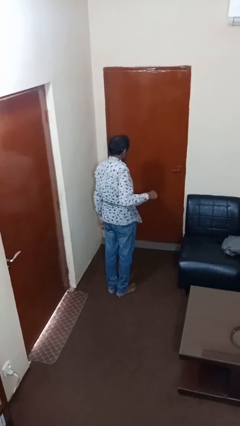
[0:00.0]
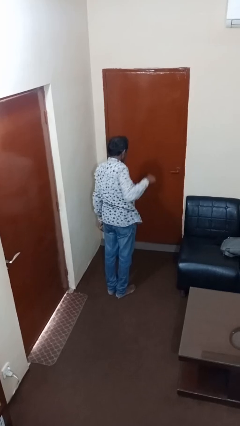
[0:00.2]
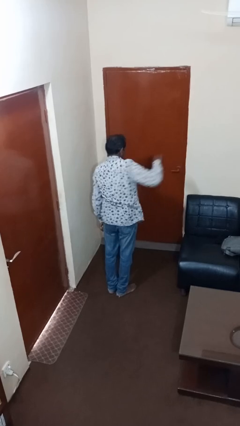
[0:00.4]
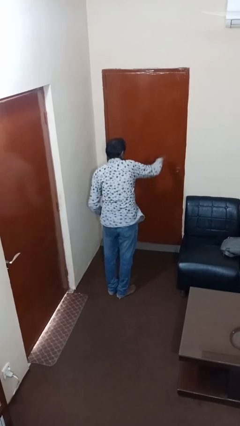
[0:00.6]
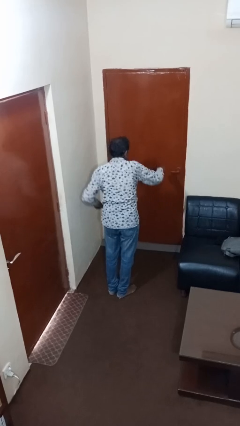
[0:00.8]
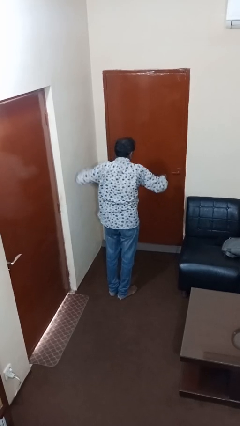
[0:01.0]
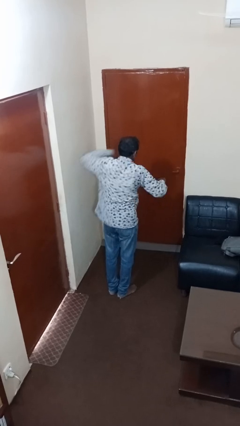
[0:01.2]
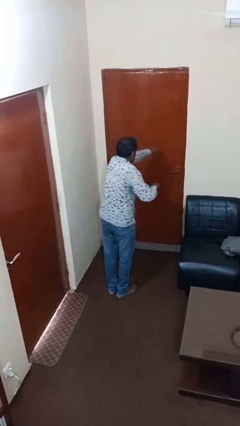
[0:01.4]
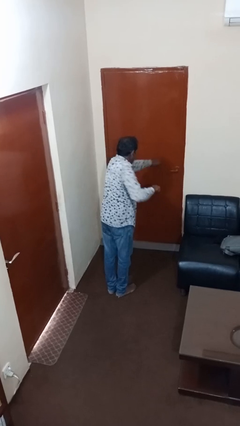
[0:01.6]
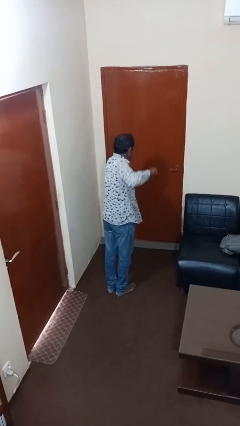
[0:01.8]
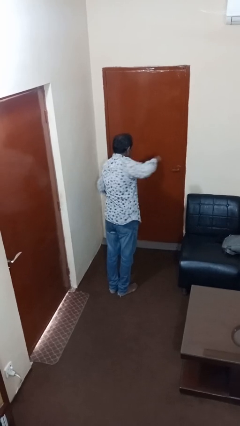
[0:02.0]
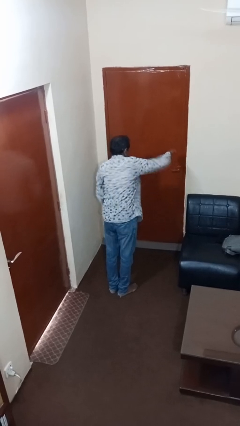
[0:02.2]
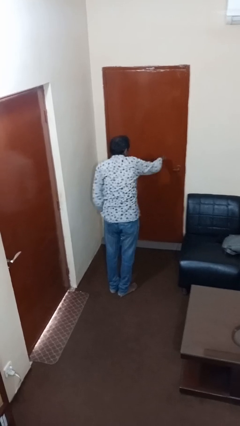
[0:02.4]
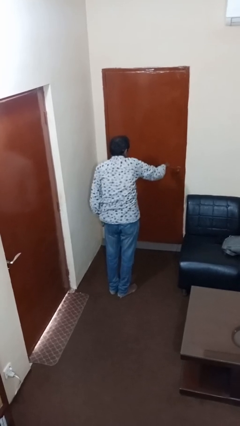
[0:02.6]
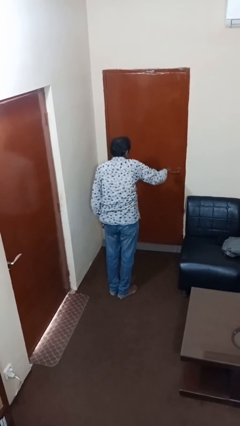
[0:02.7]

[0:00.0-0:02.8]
person punches

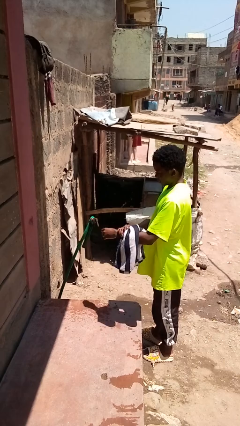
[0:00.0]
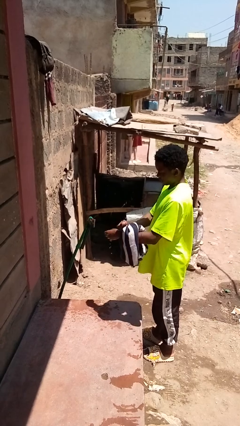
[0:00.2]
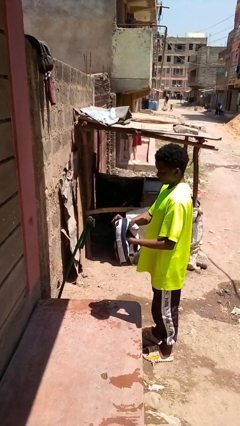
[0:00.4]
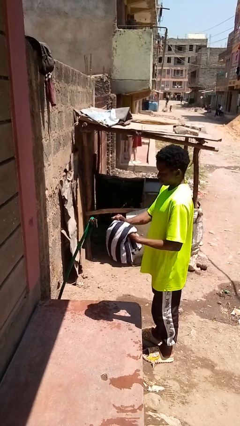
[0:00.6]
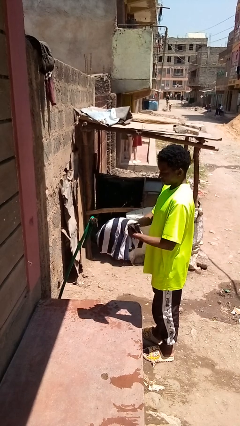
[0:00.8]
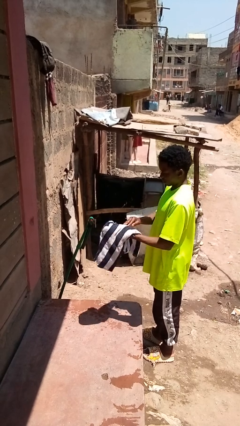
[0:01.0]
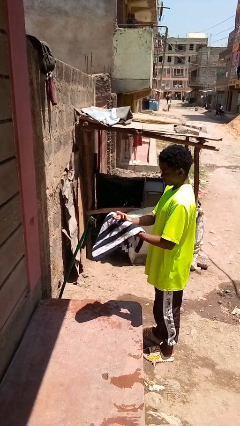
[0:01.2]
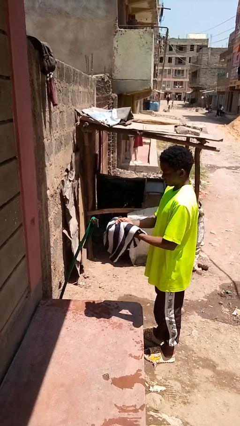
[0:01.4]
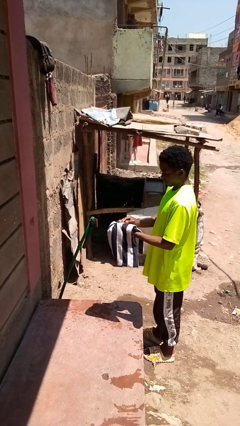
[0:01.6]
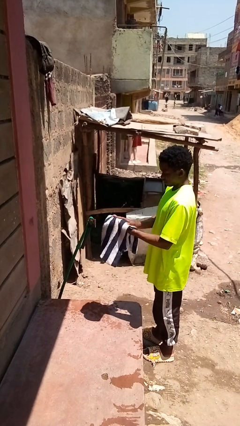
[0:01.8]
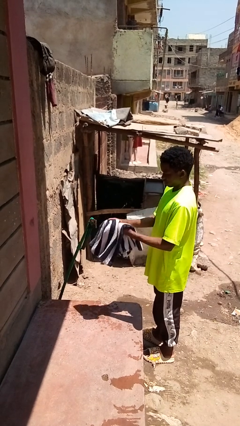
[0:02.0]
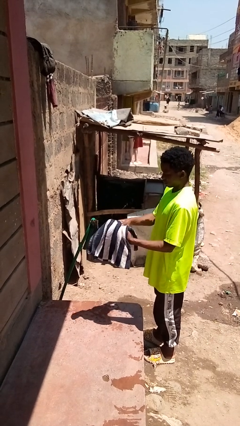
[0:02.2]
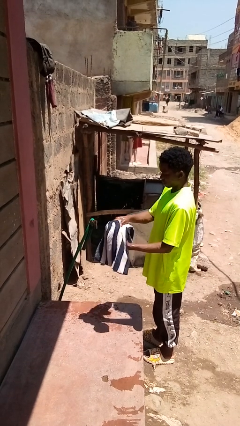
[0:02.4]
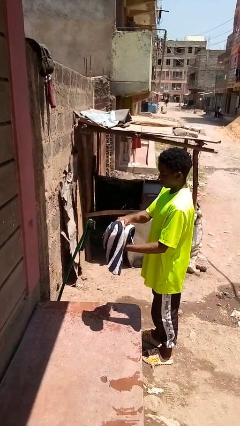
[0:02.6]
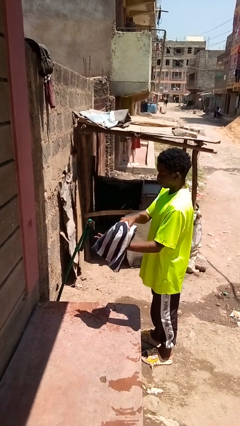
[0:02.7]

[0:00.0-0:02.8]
person dries hands with towel

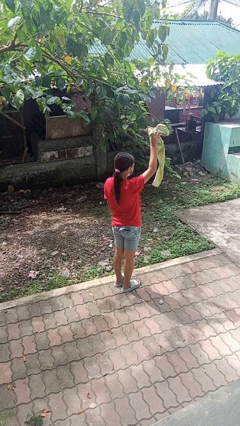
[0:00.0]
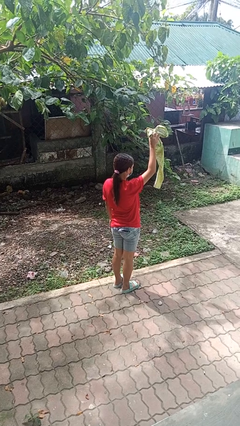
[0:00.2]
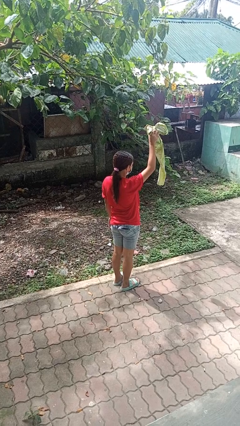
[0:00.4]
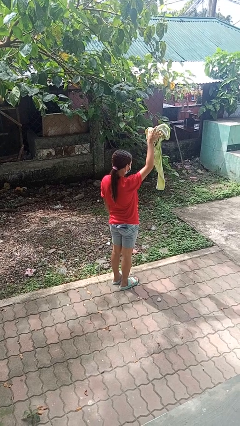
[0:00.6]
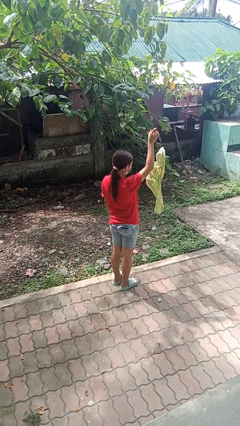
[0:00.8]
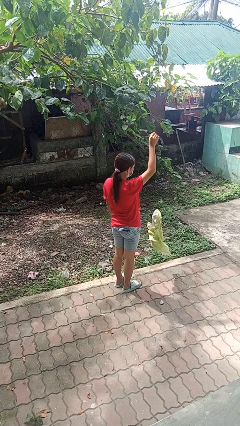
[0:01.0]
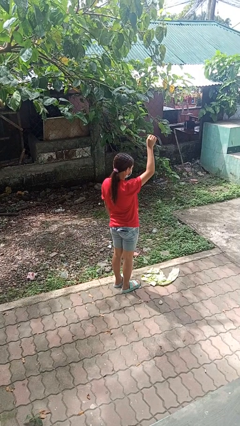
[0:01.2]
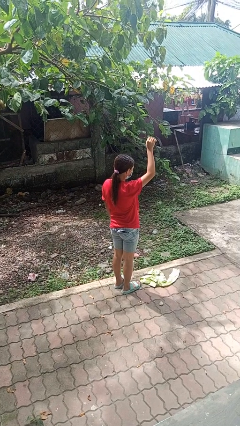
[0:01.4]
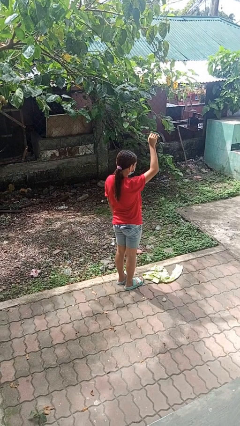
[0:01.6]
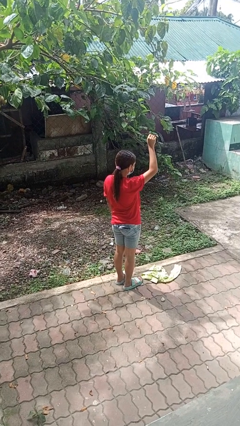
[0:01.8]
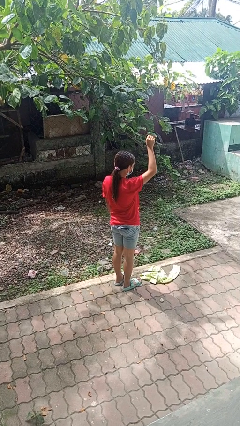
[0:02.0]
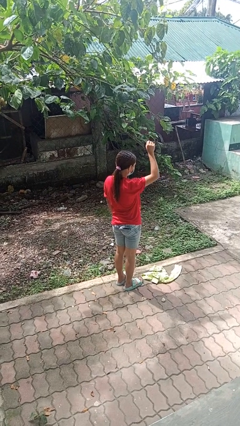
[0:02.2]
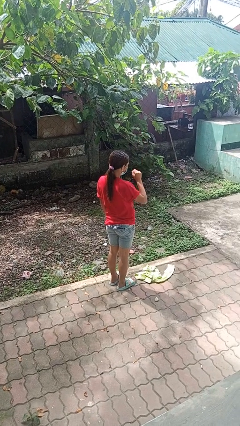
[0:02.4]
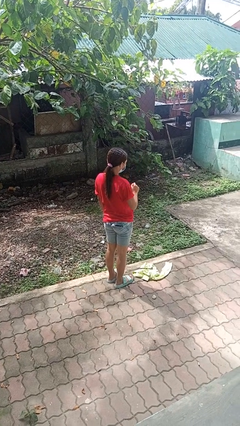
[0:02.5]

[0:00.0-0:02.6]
person drops object

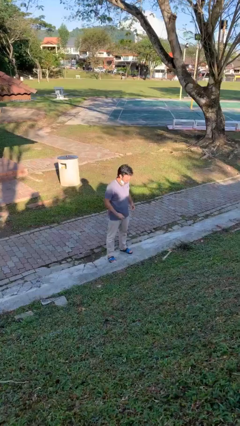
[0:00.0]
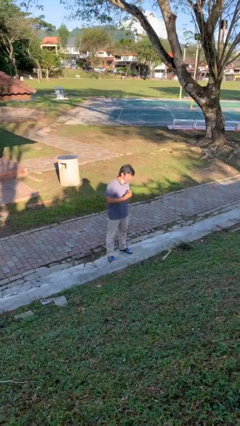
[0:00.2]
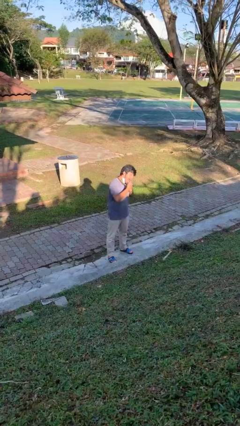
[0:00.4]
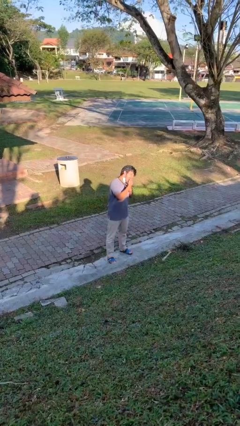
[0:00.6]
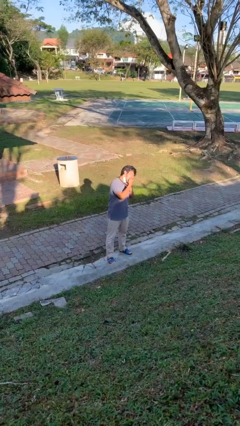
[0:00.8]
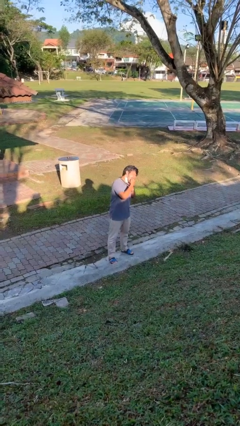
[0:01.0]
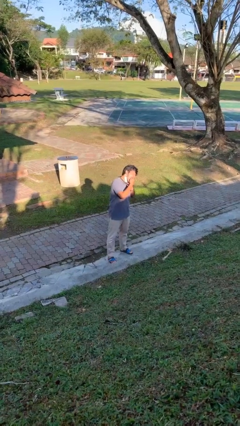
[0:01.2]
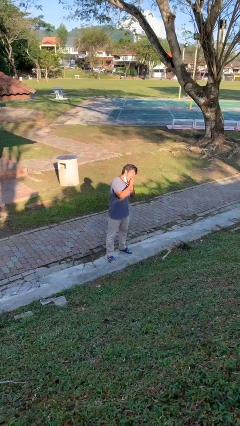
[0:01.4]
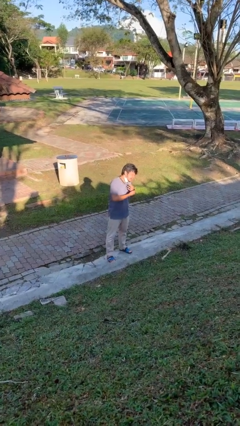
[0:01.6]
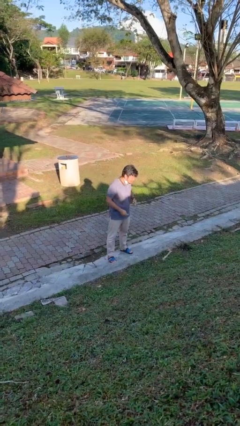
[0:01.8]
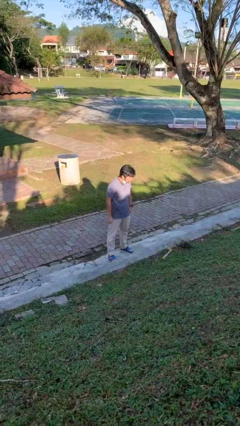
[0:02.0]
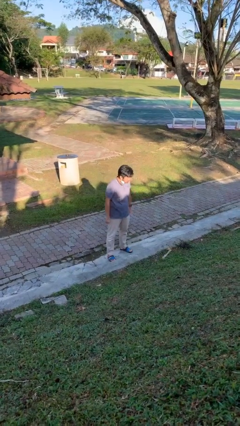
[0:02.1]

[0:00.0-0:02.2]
person flosses

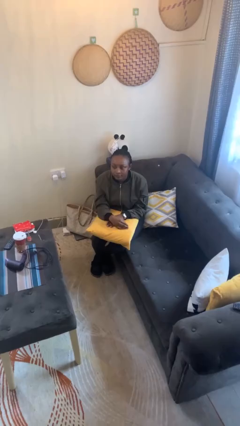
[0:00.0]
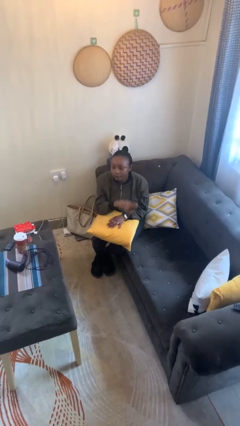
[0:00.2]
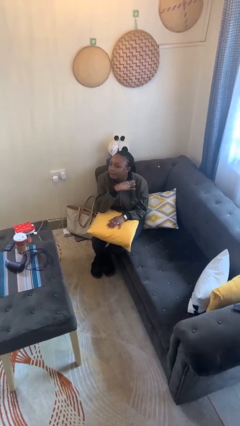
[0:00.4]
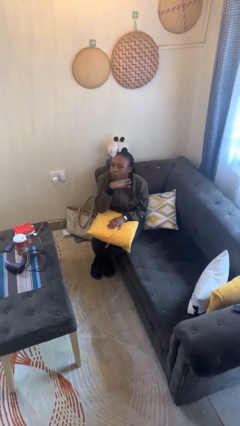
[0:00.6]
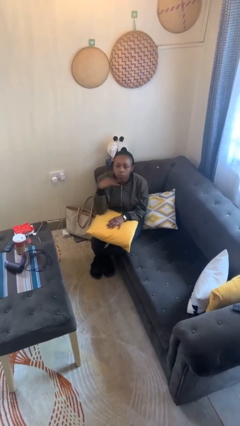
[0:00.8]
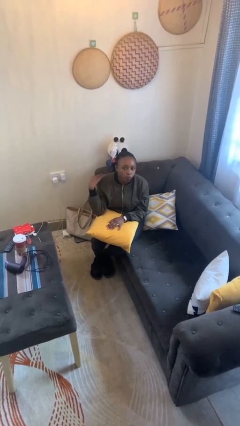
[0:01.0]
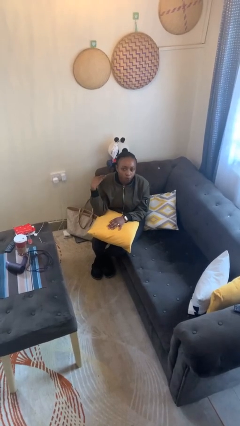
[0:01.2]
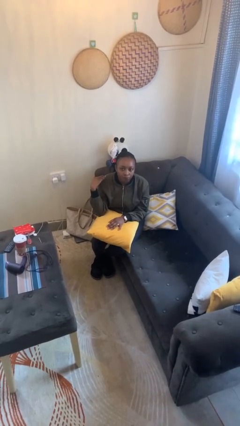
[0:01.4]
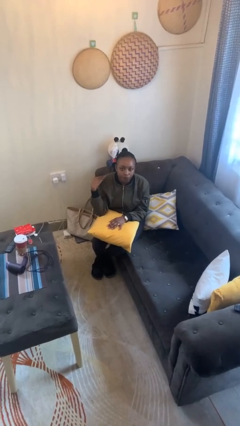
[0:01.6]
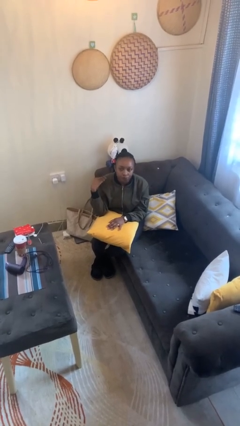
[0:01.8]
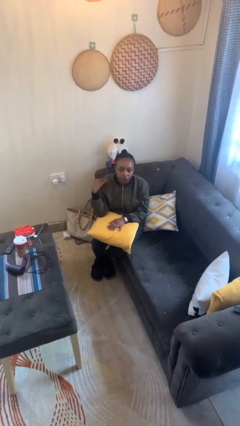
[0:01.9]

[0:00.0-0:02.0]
person gestures cut

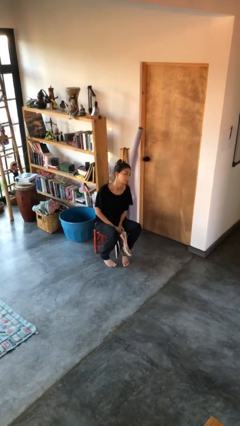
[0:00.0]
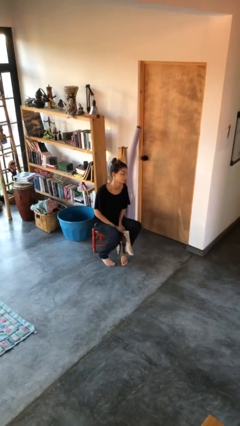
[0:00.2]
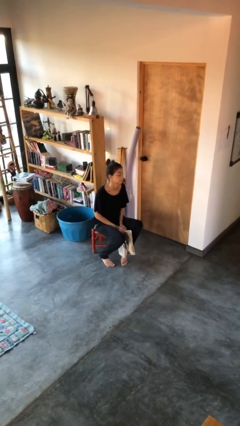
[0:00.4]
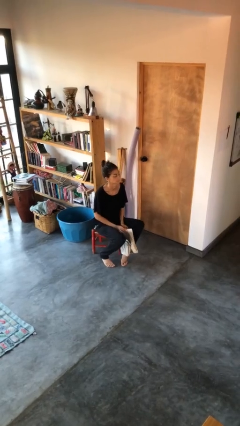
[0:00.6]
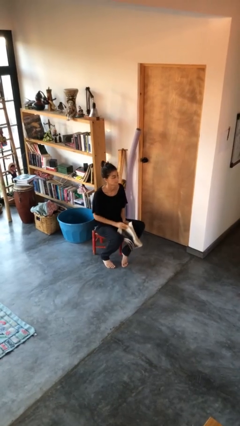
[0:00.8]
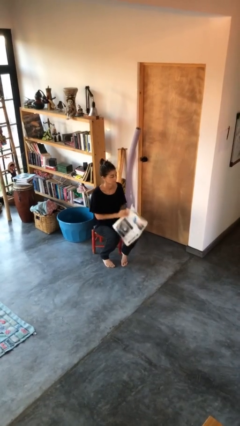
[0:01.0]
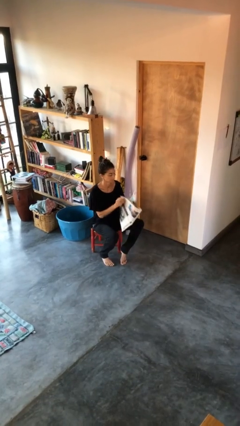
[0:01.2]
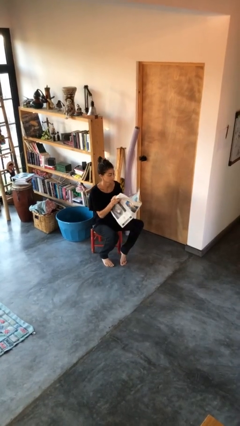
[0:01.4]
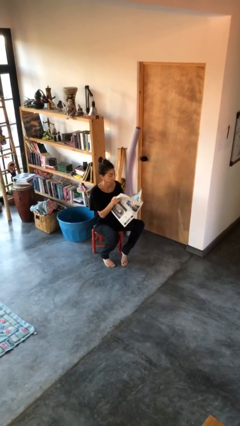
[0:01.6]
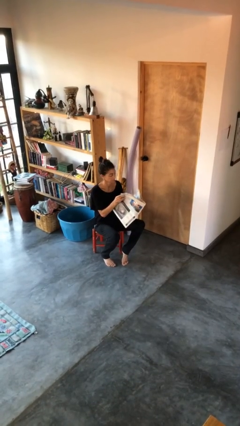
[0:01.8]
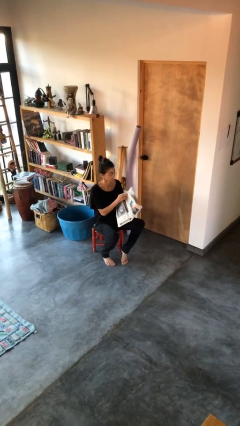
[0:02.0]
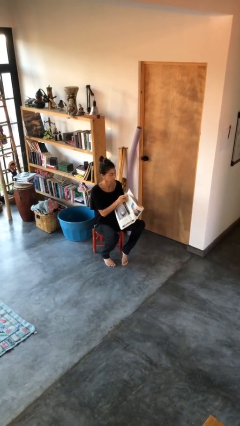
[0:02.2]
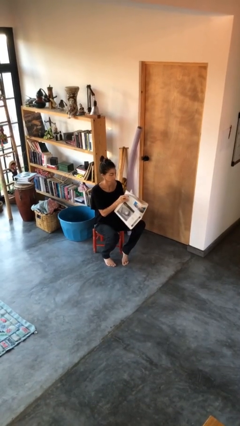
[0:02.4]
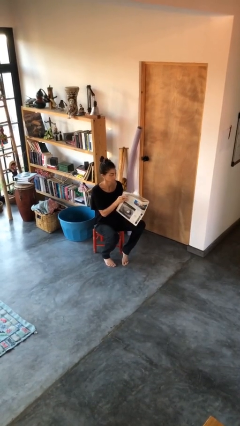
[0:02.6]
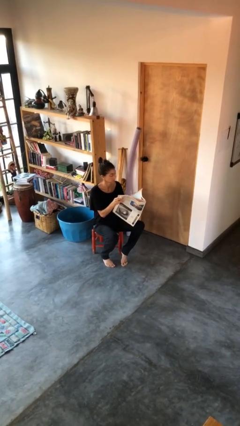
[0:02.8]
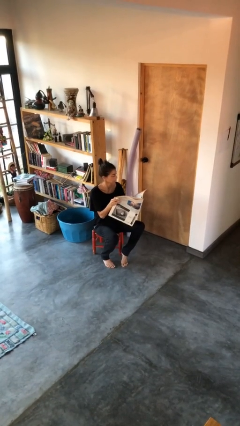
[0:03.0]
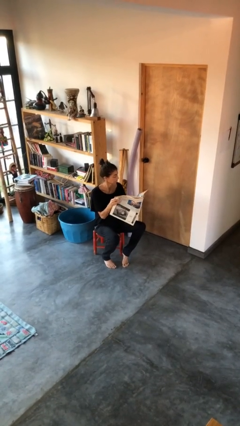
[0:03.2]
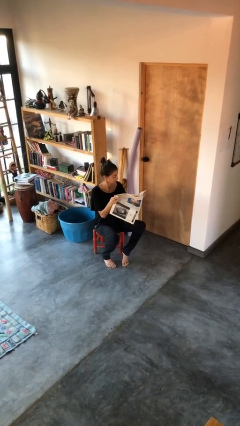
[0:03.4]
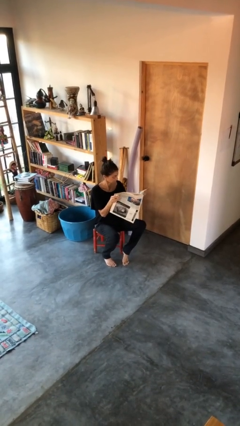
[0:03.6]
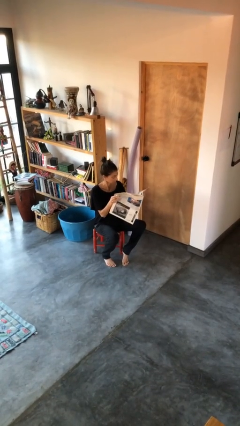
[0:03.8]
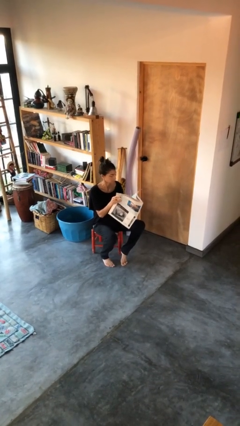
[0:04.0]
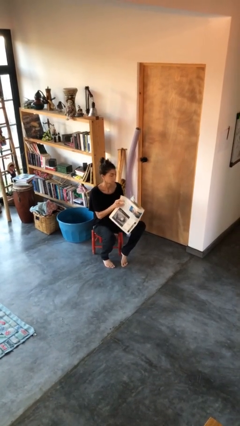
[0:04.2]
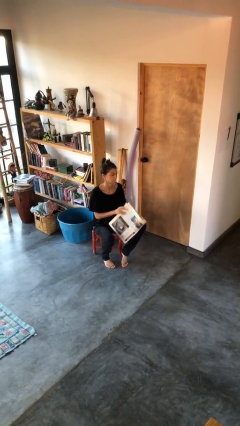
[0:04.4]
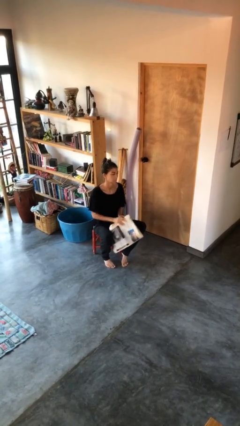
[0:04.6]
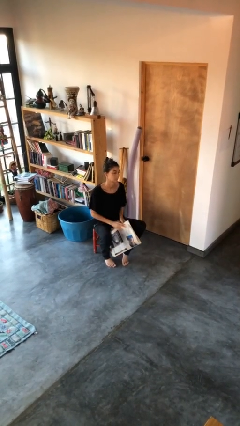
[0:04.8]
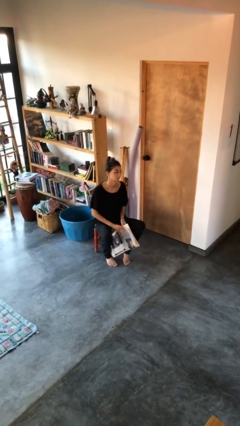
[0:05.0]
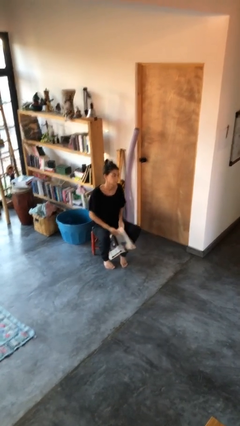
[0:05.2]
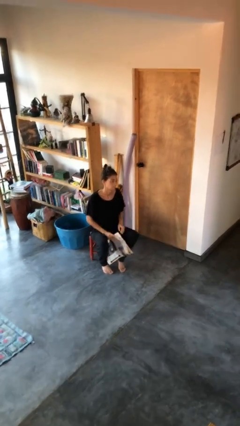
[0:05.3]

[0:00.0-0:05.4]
person reads newspaper
